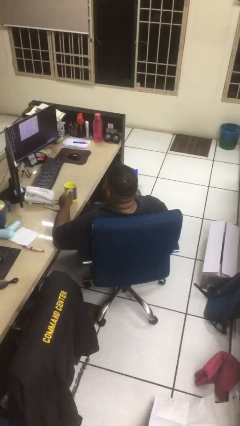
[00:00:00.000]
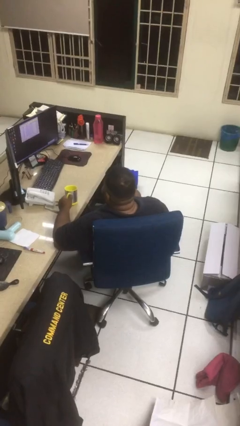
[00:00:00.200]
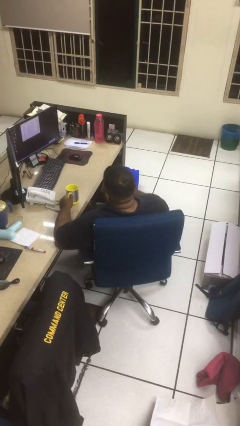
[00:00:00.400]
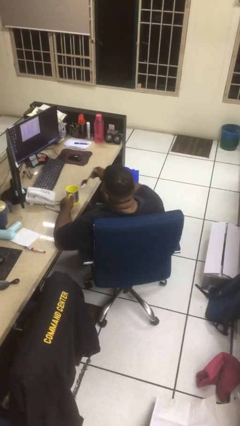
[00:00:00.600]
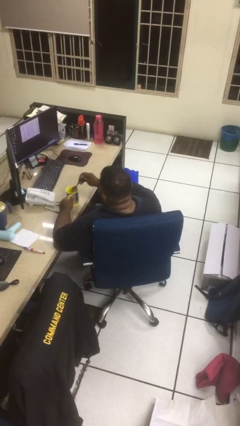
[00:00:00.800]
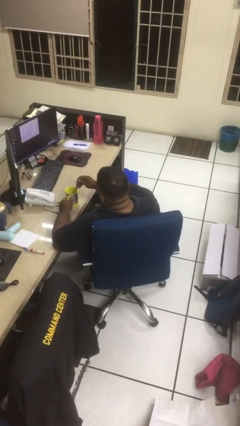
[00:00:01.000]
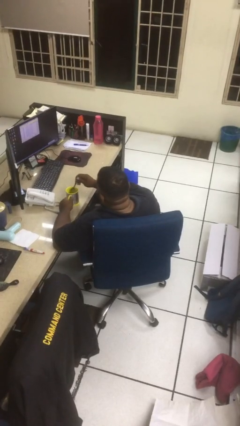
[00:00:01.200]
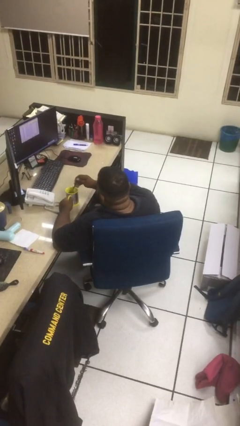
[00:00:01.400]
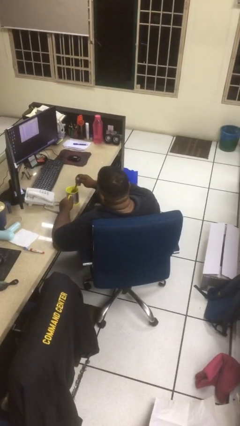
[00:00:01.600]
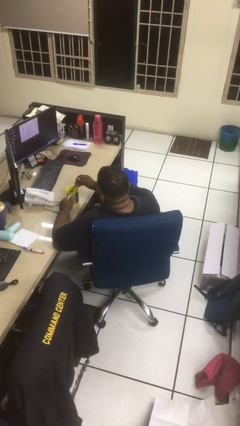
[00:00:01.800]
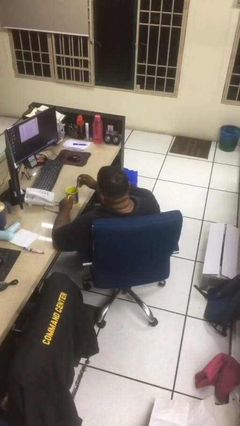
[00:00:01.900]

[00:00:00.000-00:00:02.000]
person stirs mug

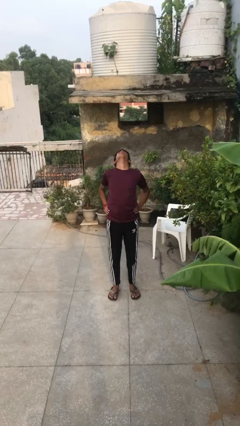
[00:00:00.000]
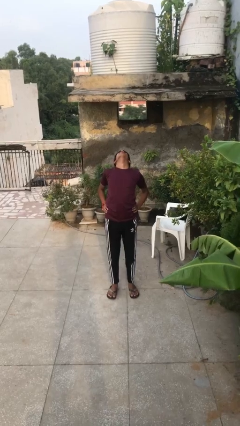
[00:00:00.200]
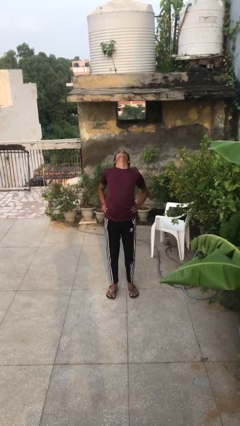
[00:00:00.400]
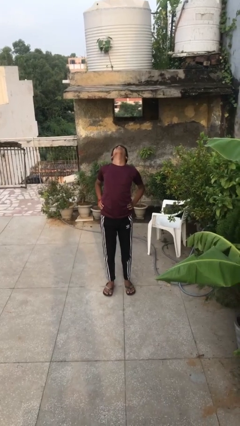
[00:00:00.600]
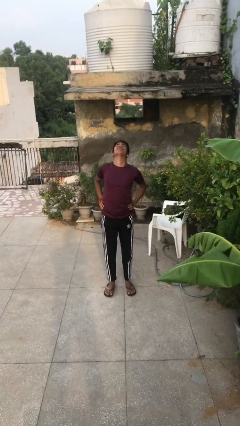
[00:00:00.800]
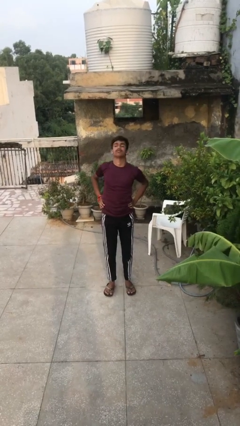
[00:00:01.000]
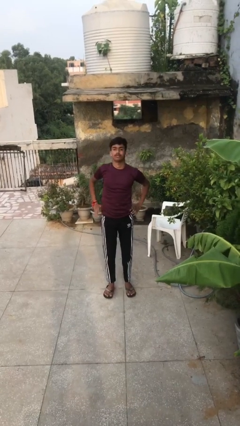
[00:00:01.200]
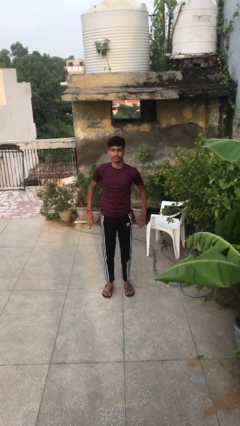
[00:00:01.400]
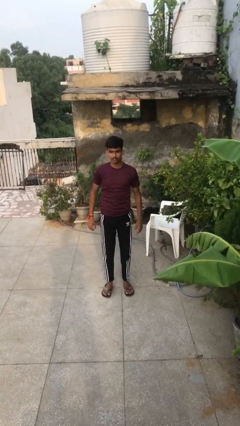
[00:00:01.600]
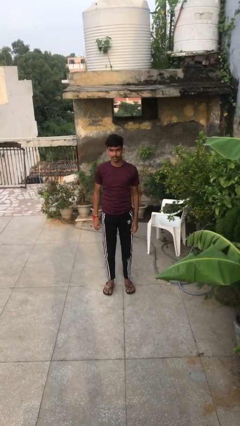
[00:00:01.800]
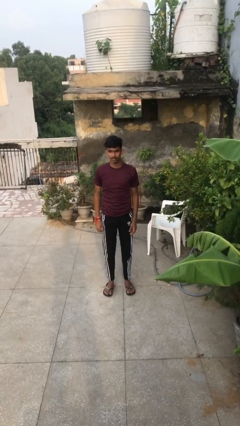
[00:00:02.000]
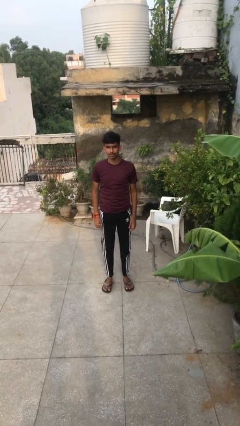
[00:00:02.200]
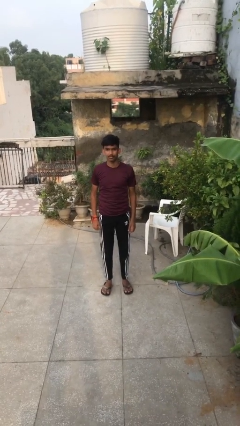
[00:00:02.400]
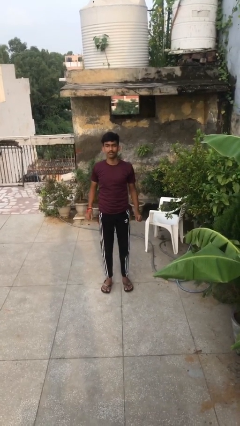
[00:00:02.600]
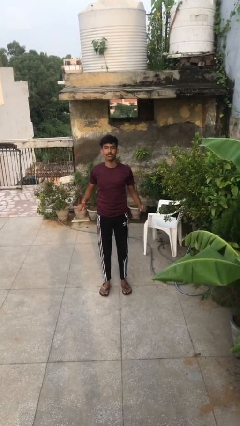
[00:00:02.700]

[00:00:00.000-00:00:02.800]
person stretches back

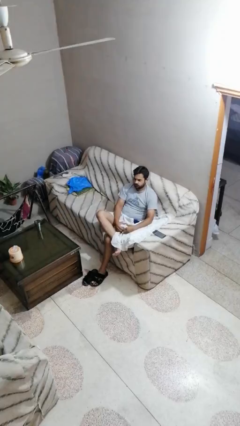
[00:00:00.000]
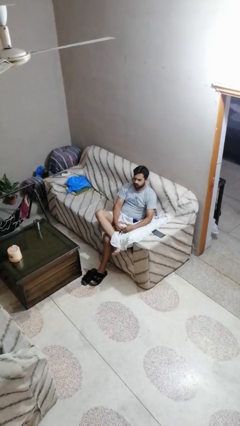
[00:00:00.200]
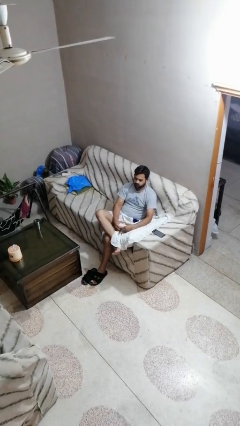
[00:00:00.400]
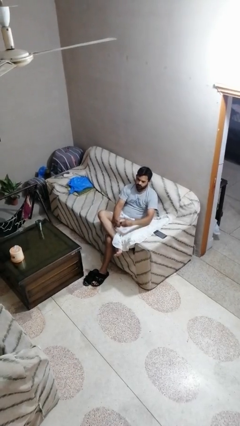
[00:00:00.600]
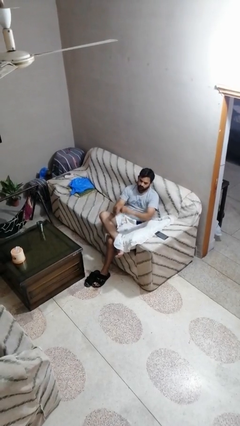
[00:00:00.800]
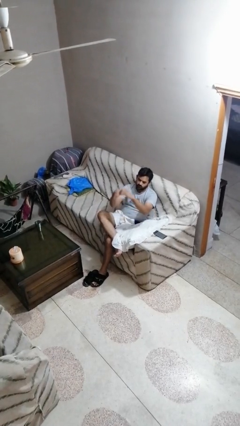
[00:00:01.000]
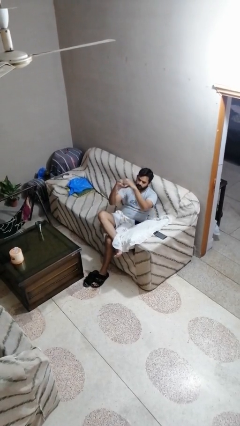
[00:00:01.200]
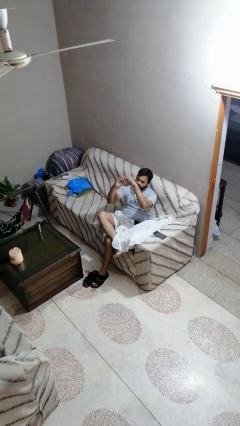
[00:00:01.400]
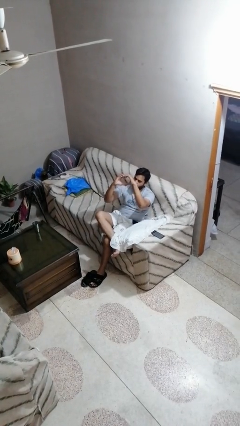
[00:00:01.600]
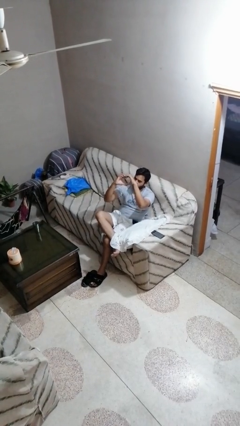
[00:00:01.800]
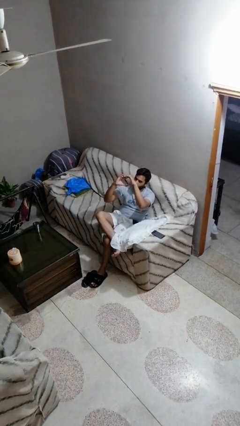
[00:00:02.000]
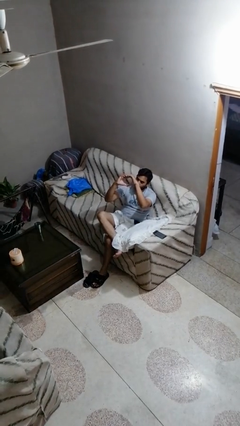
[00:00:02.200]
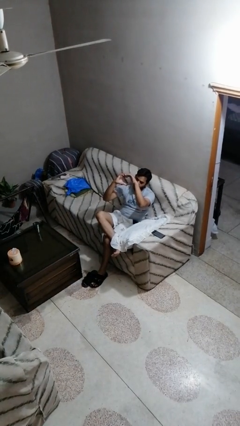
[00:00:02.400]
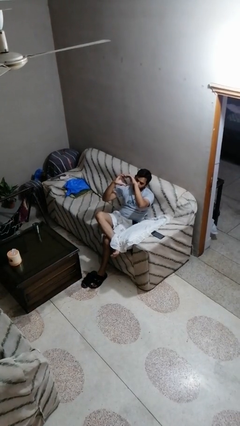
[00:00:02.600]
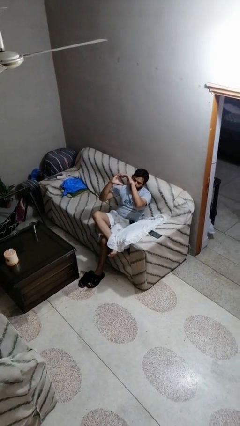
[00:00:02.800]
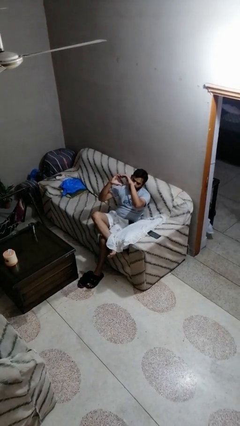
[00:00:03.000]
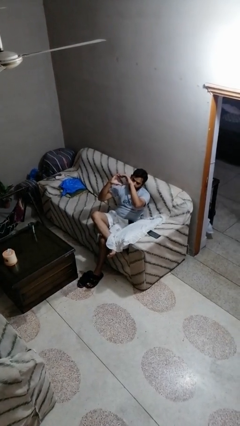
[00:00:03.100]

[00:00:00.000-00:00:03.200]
person gestures heart

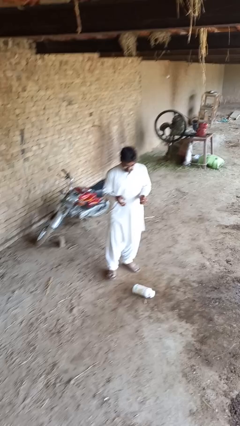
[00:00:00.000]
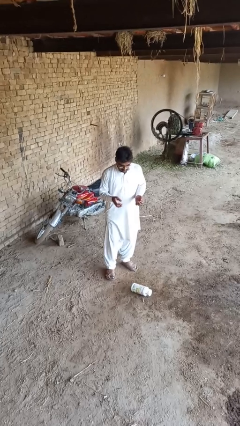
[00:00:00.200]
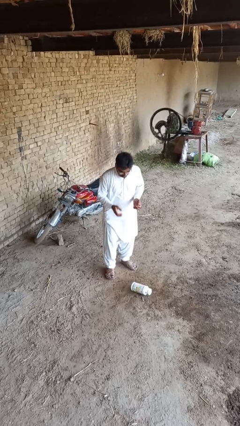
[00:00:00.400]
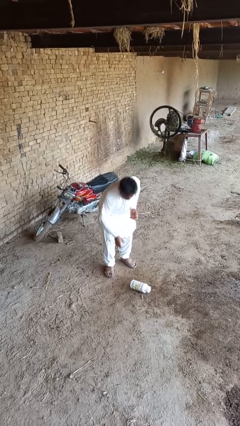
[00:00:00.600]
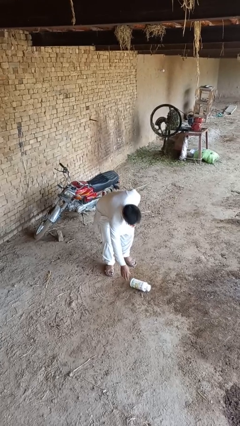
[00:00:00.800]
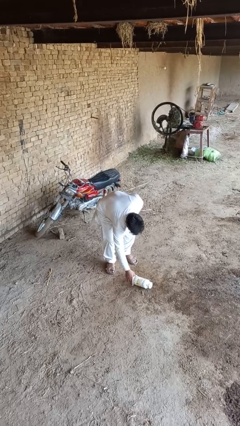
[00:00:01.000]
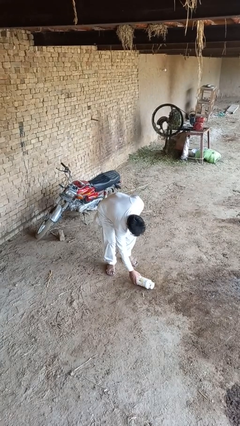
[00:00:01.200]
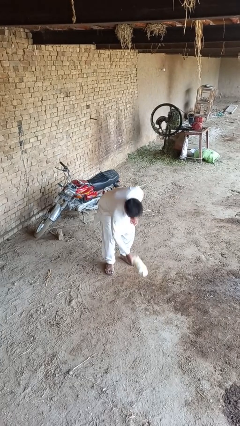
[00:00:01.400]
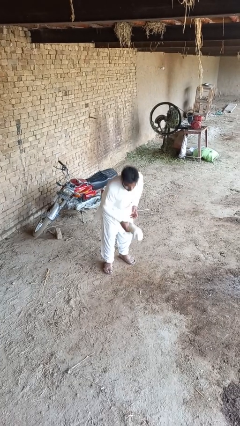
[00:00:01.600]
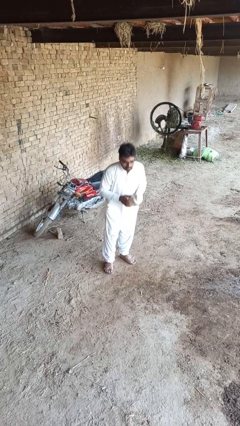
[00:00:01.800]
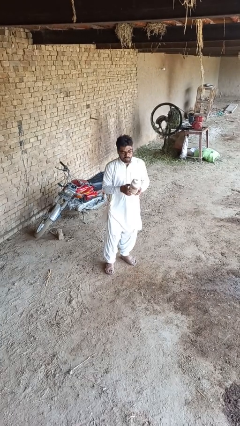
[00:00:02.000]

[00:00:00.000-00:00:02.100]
person picks up object from floor

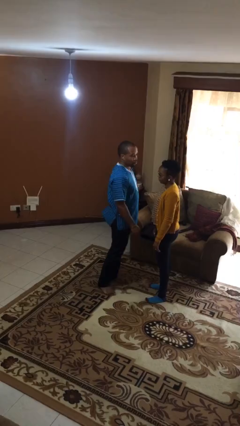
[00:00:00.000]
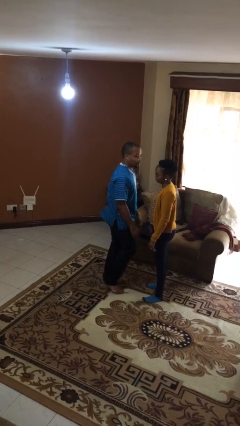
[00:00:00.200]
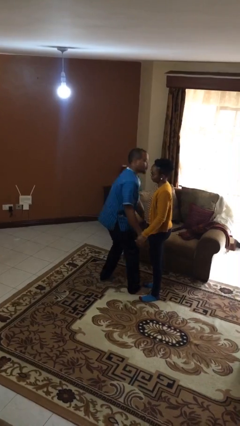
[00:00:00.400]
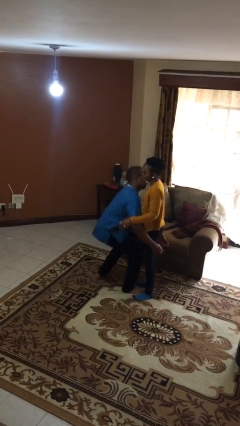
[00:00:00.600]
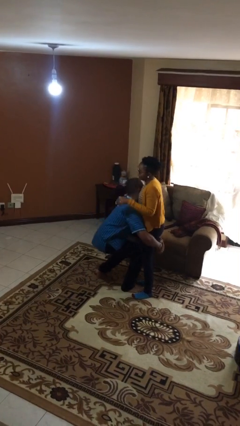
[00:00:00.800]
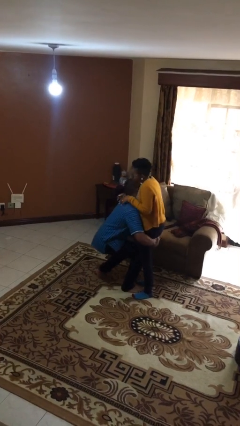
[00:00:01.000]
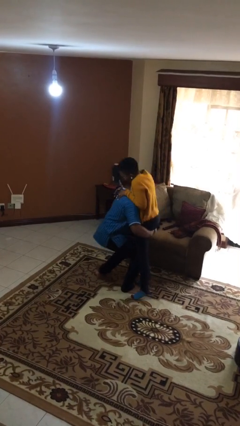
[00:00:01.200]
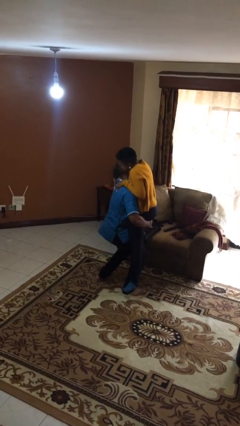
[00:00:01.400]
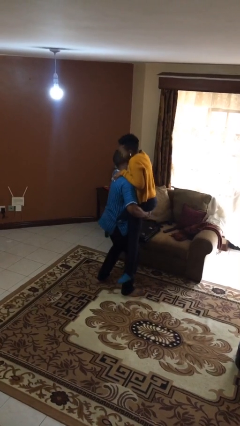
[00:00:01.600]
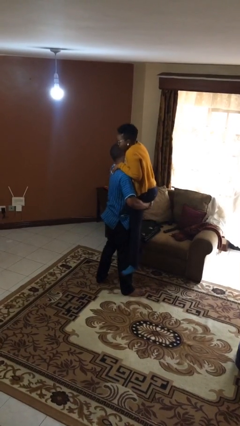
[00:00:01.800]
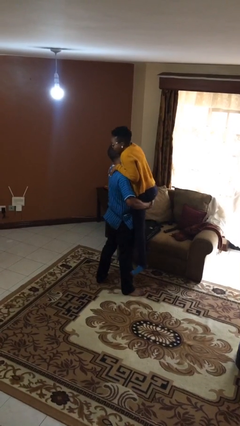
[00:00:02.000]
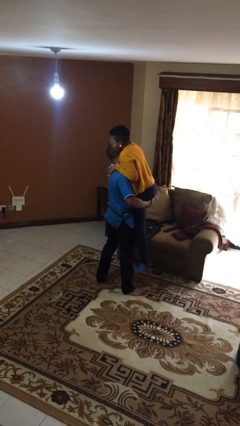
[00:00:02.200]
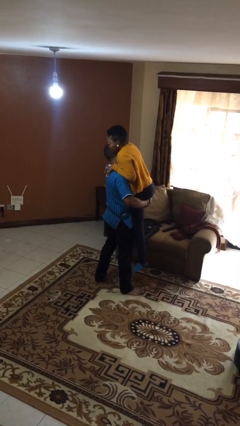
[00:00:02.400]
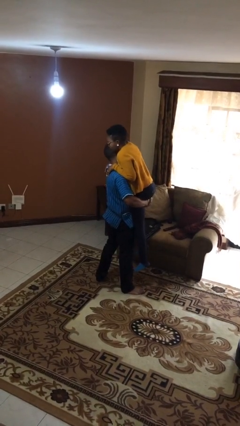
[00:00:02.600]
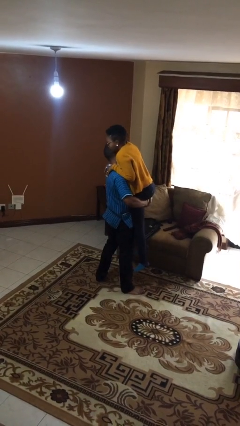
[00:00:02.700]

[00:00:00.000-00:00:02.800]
person picks up person

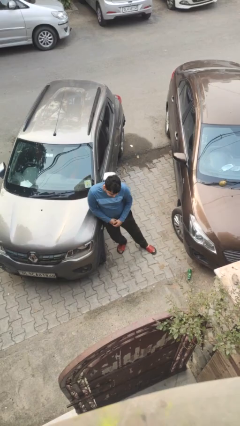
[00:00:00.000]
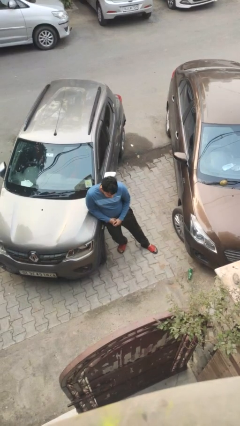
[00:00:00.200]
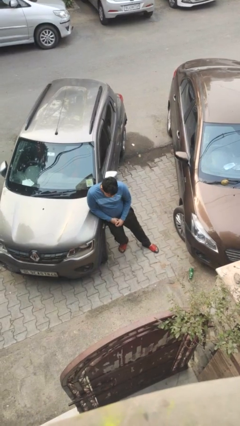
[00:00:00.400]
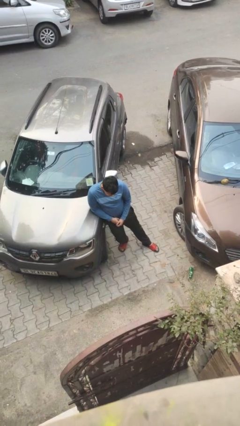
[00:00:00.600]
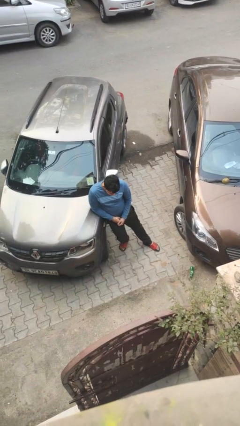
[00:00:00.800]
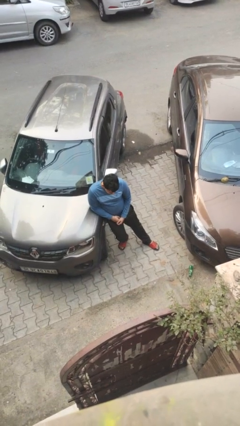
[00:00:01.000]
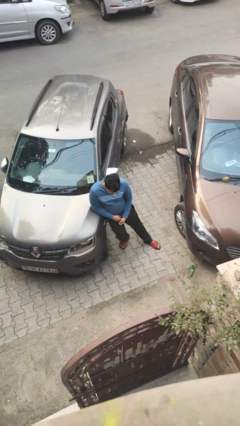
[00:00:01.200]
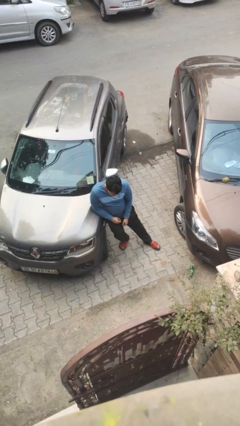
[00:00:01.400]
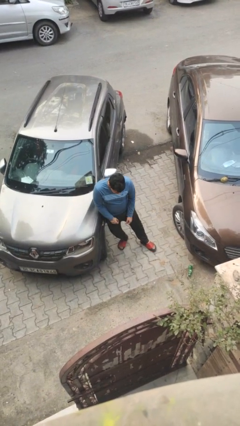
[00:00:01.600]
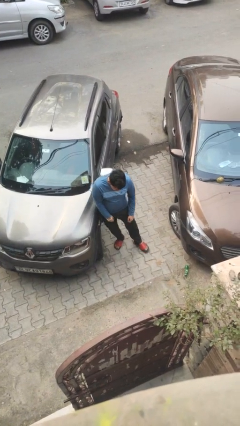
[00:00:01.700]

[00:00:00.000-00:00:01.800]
person leans against car

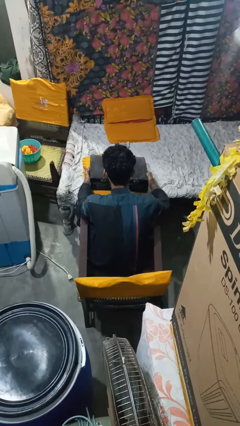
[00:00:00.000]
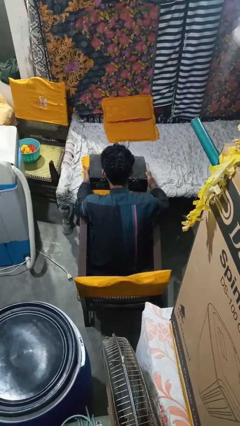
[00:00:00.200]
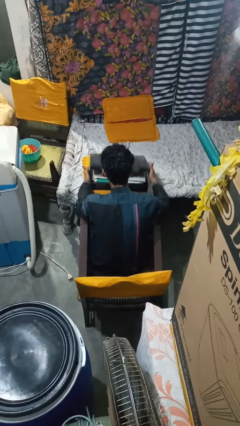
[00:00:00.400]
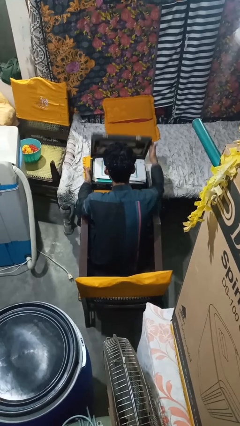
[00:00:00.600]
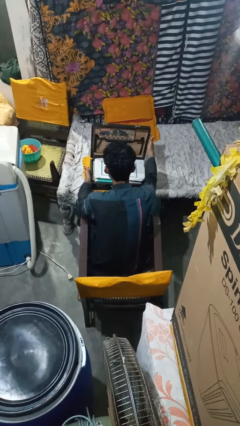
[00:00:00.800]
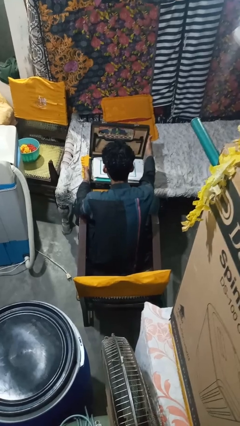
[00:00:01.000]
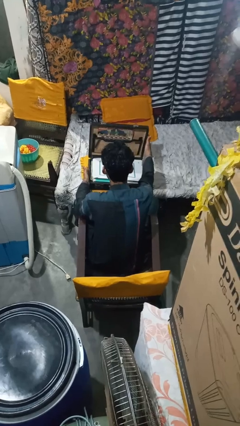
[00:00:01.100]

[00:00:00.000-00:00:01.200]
person opens suitcase

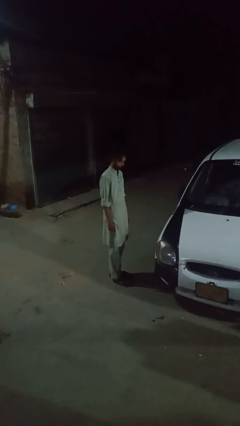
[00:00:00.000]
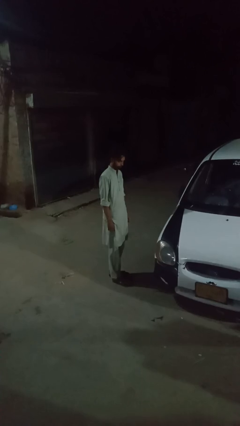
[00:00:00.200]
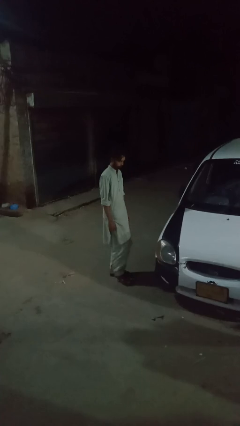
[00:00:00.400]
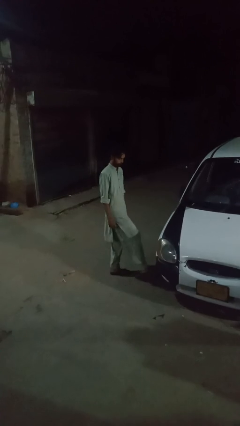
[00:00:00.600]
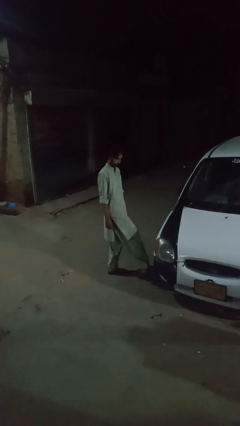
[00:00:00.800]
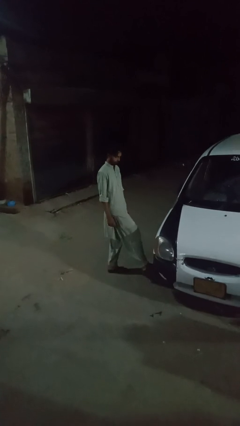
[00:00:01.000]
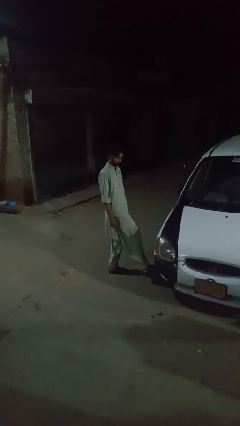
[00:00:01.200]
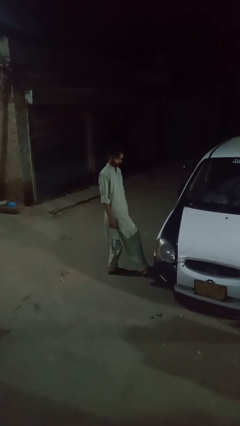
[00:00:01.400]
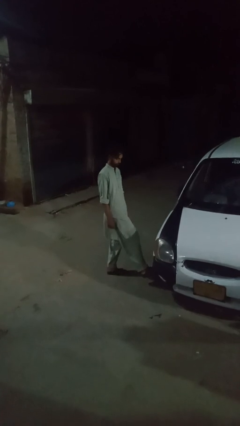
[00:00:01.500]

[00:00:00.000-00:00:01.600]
person kicks car tires
